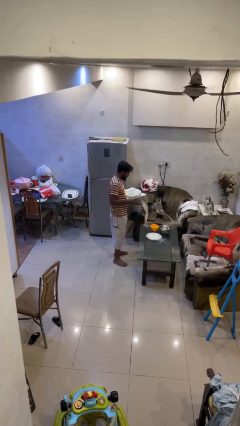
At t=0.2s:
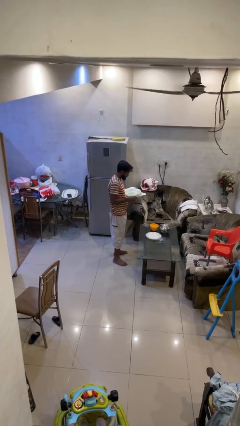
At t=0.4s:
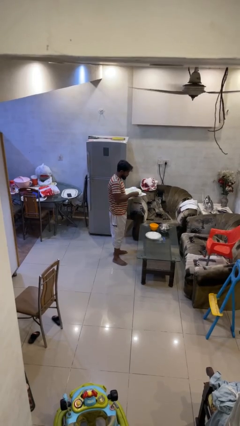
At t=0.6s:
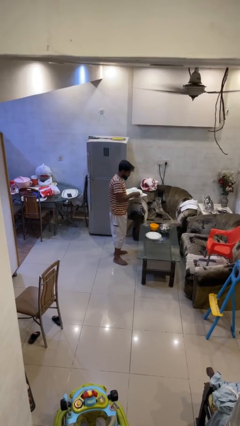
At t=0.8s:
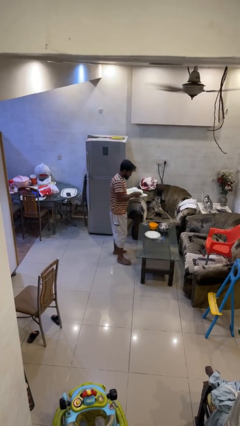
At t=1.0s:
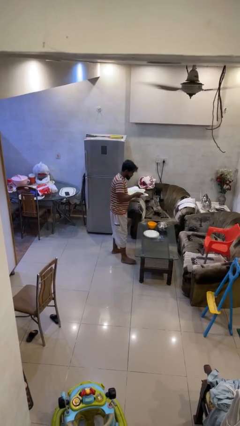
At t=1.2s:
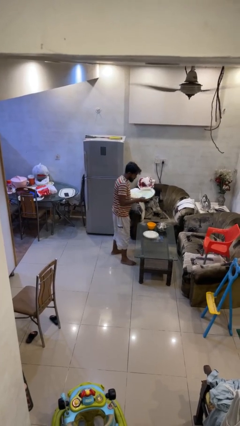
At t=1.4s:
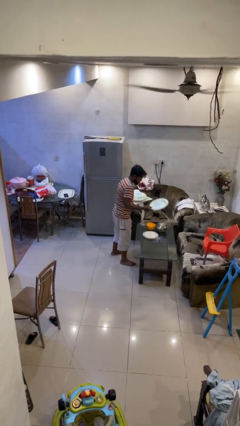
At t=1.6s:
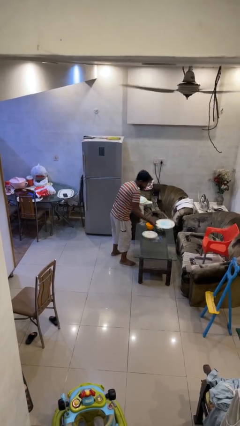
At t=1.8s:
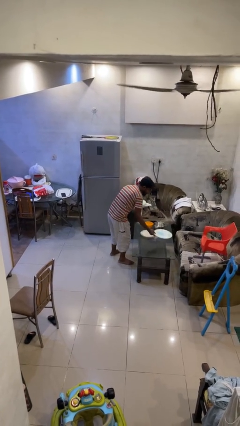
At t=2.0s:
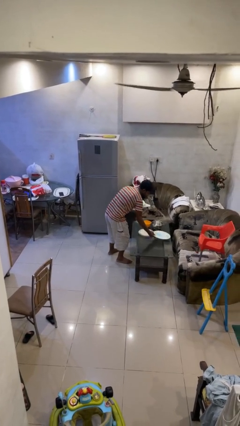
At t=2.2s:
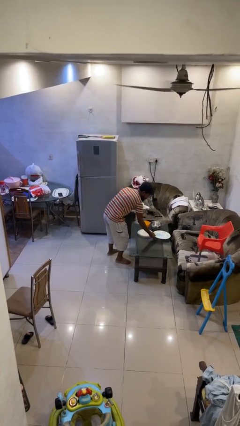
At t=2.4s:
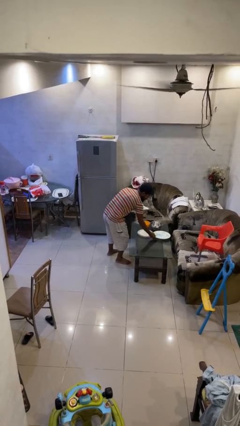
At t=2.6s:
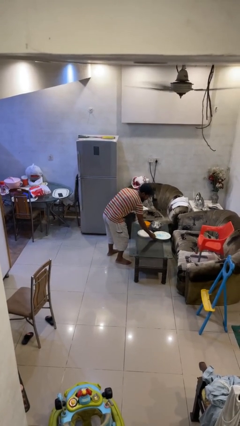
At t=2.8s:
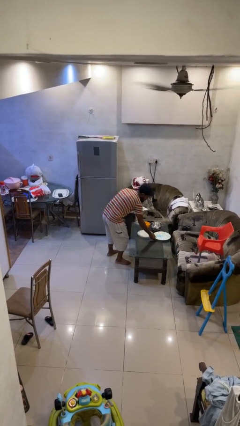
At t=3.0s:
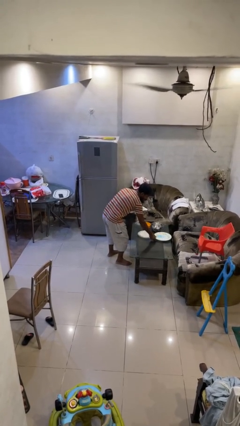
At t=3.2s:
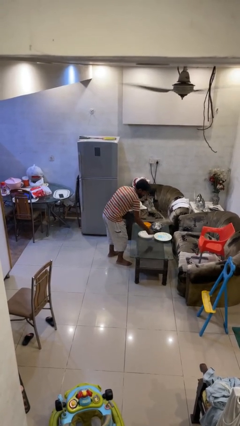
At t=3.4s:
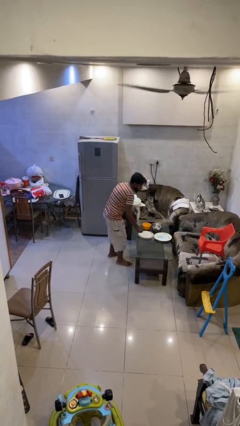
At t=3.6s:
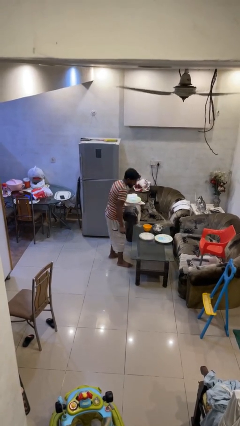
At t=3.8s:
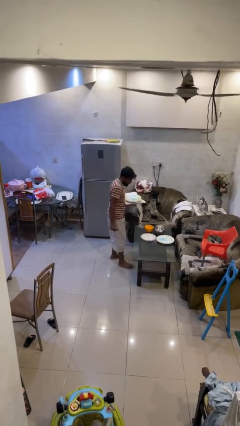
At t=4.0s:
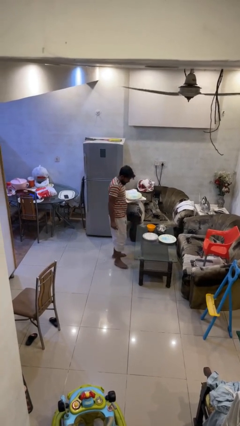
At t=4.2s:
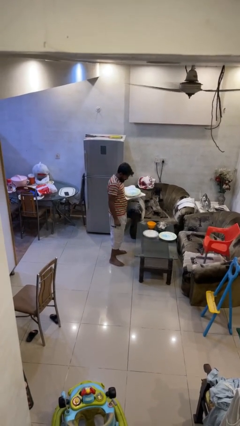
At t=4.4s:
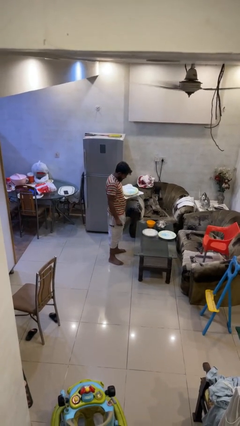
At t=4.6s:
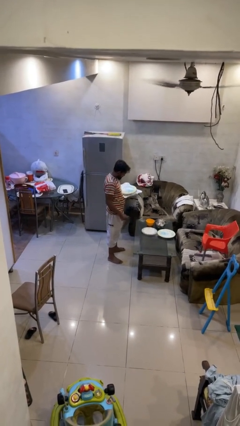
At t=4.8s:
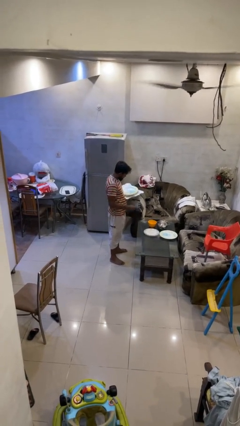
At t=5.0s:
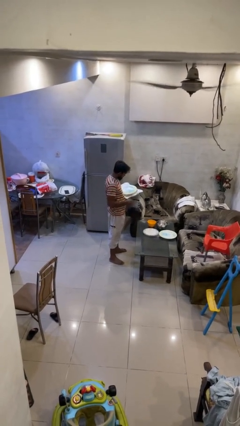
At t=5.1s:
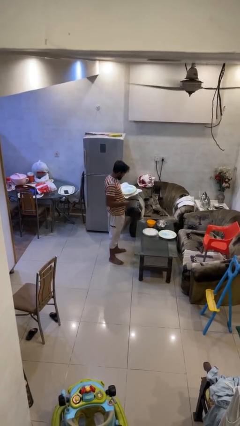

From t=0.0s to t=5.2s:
person sets table

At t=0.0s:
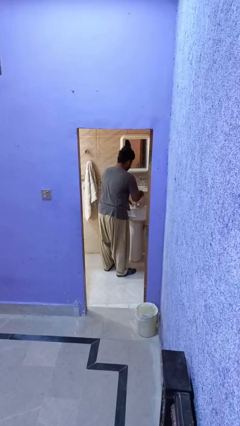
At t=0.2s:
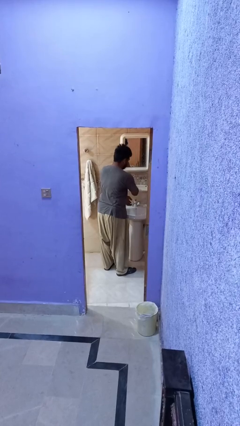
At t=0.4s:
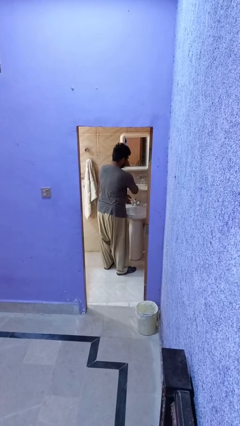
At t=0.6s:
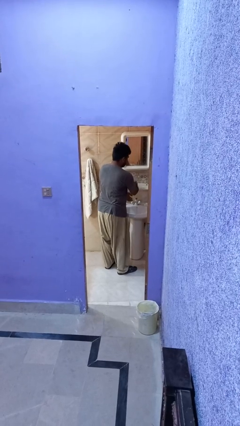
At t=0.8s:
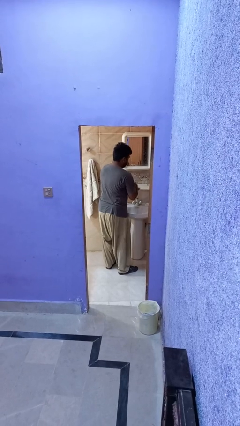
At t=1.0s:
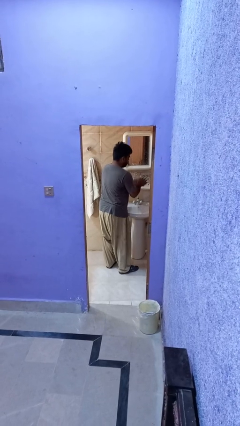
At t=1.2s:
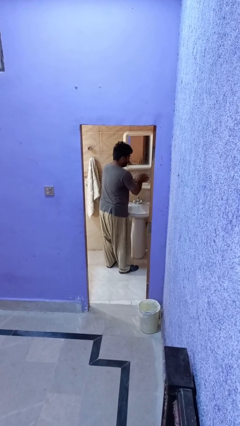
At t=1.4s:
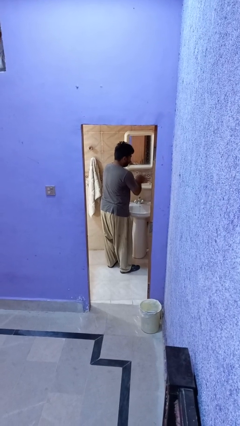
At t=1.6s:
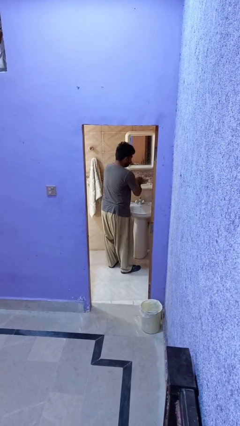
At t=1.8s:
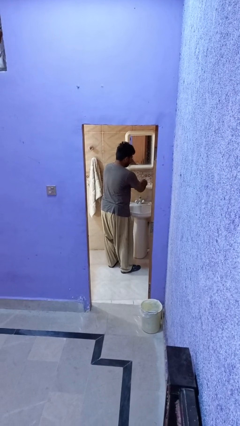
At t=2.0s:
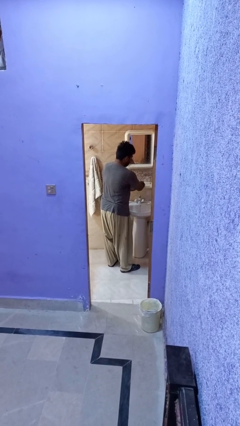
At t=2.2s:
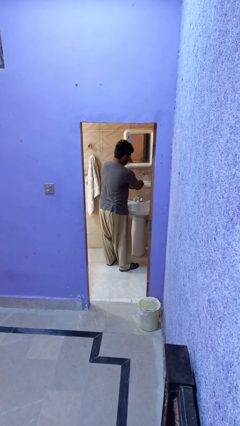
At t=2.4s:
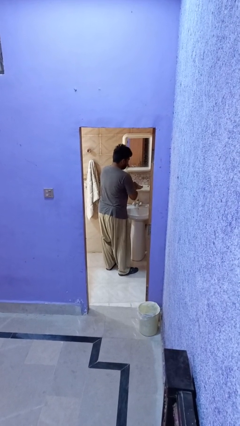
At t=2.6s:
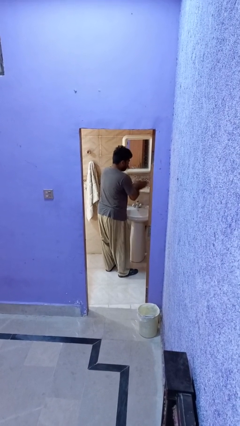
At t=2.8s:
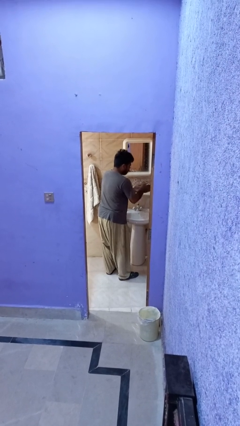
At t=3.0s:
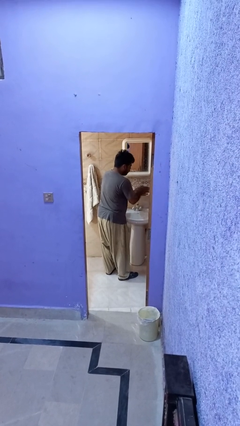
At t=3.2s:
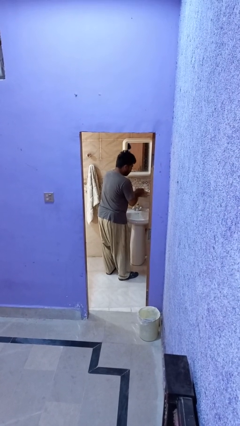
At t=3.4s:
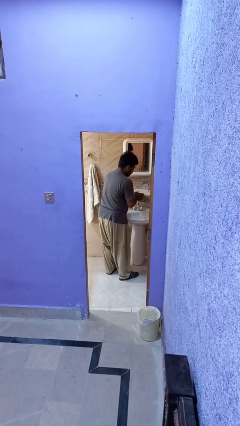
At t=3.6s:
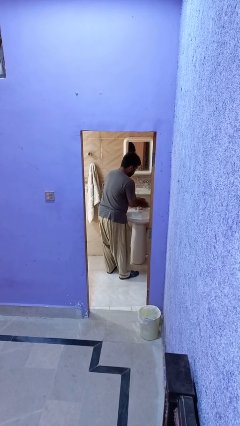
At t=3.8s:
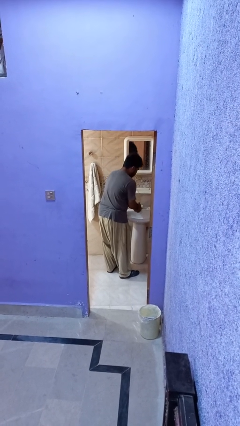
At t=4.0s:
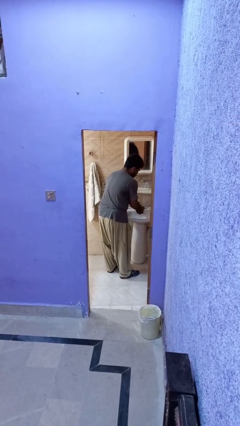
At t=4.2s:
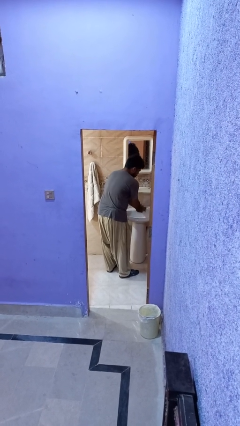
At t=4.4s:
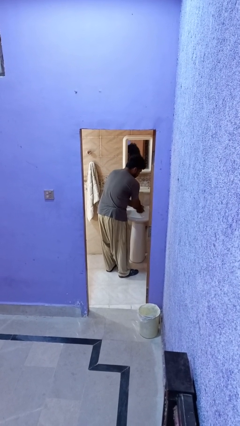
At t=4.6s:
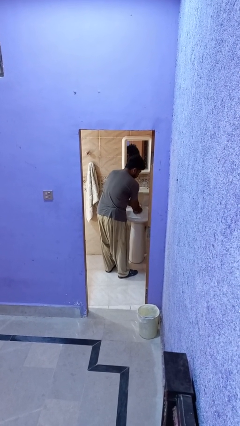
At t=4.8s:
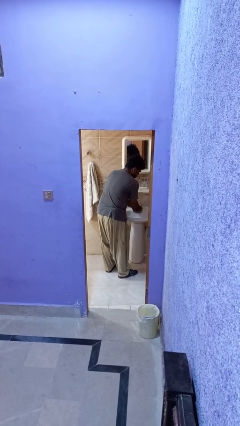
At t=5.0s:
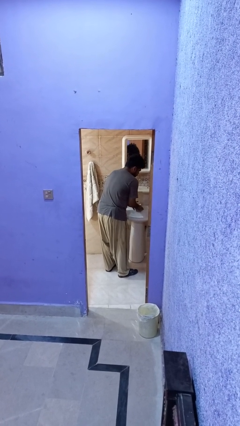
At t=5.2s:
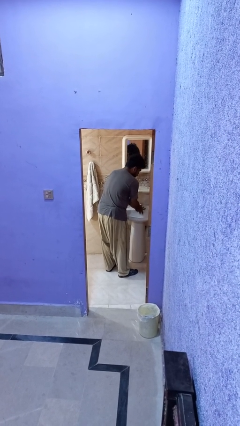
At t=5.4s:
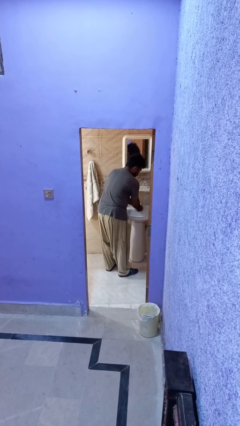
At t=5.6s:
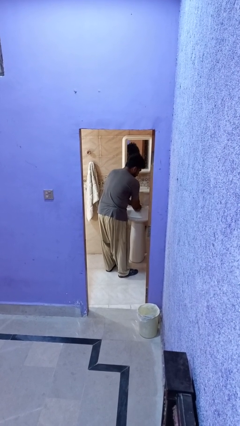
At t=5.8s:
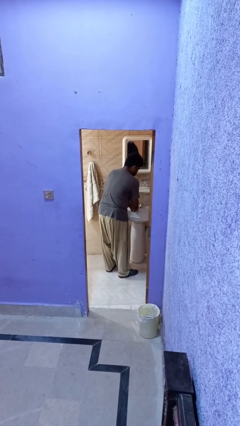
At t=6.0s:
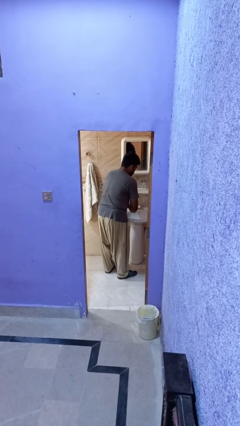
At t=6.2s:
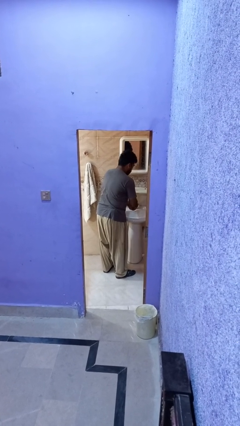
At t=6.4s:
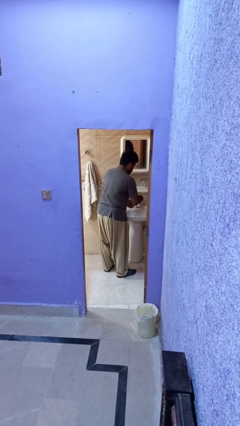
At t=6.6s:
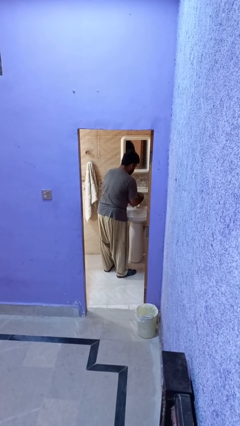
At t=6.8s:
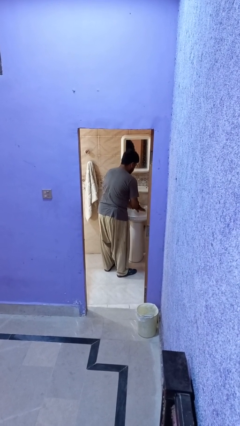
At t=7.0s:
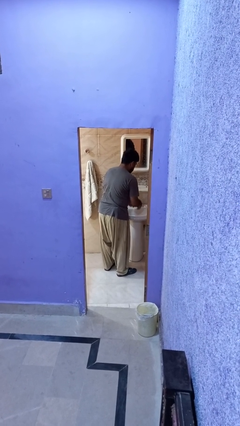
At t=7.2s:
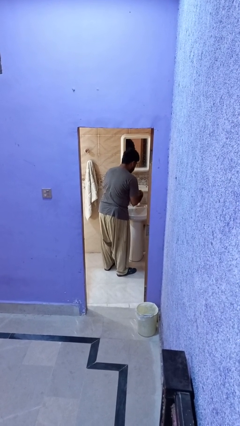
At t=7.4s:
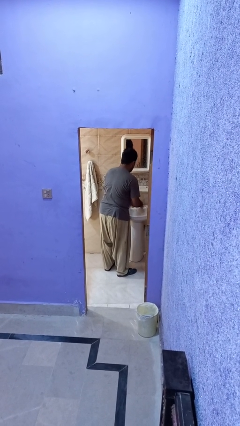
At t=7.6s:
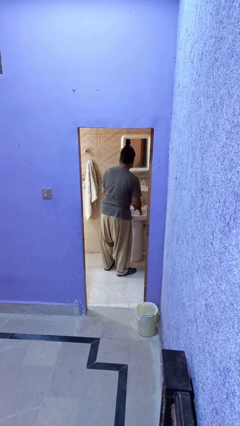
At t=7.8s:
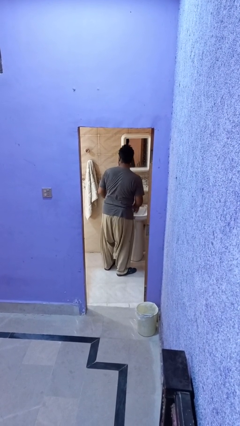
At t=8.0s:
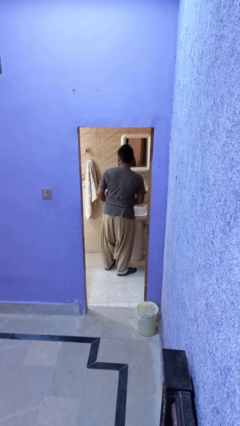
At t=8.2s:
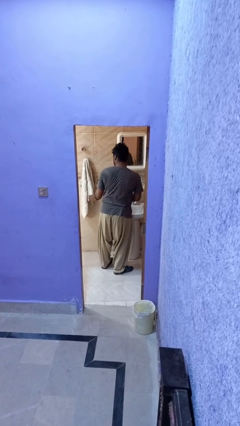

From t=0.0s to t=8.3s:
person washes hands

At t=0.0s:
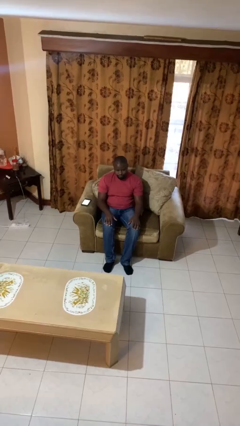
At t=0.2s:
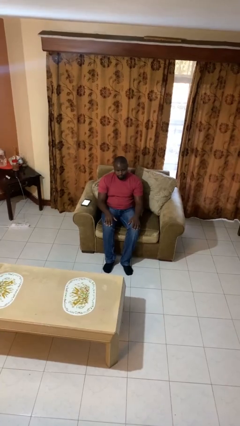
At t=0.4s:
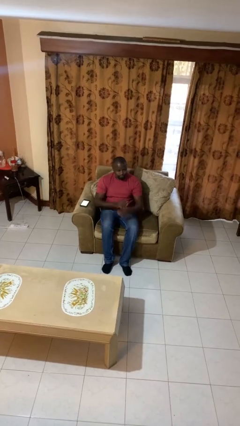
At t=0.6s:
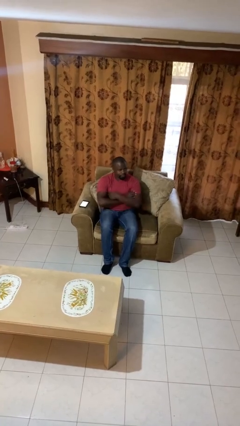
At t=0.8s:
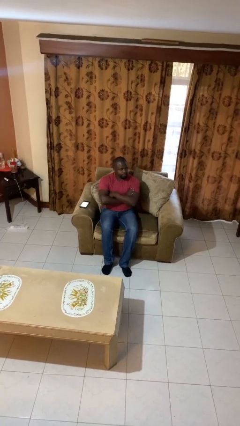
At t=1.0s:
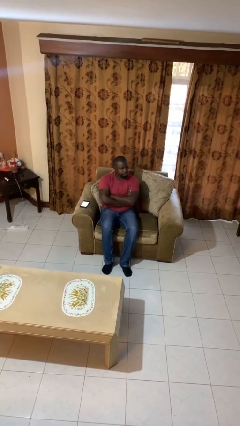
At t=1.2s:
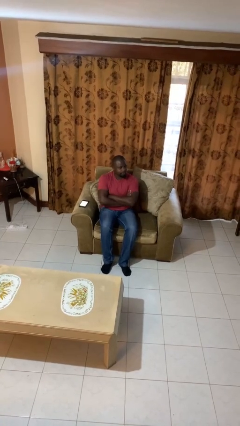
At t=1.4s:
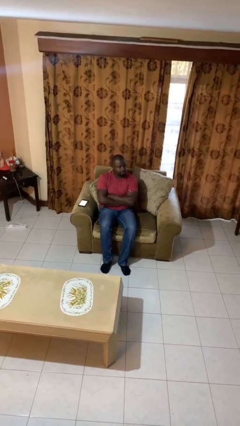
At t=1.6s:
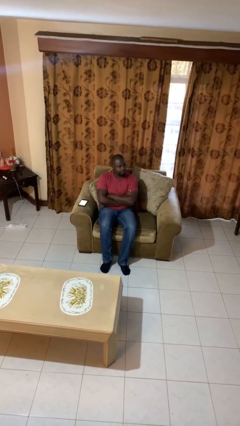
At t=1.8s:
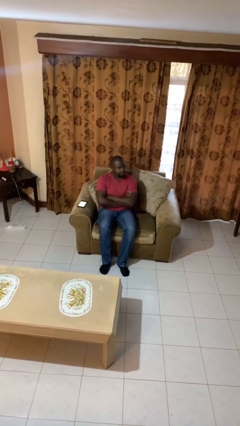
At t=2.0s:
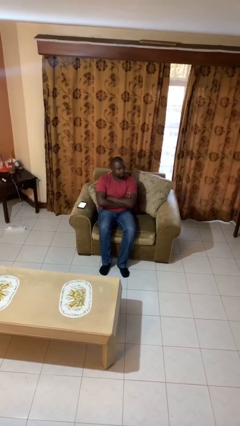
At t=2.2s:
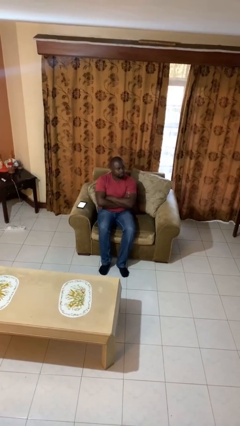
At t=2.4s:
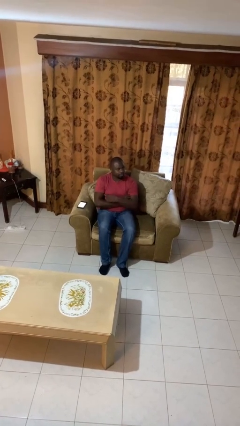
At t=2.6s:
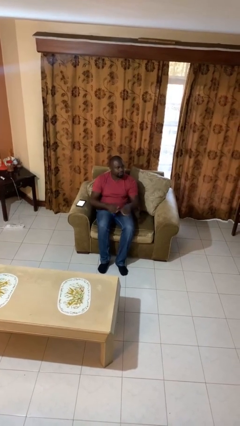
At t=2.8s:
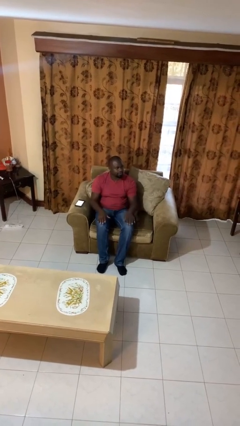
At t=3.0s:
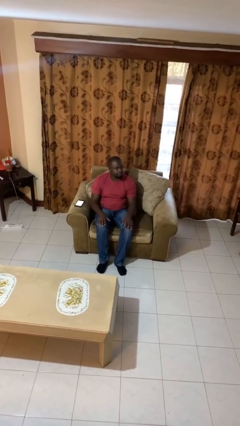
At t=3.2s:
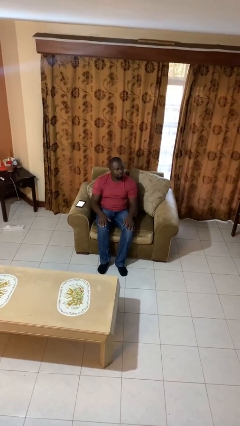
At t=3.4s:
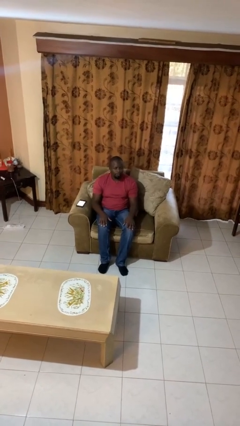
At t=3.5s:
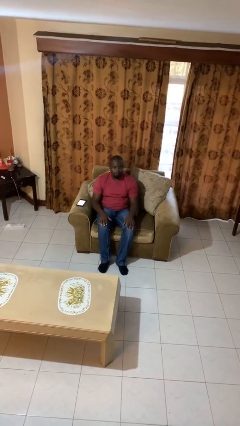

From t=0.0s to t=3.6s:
person crosses arms

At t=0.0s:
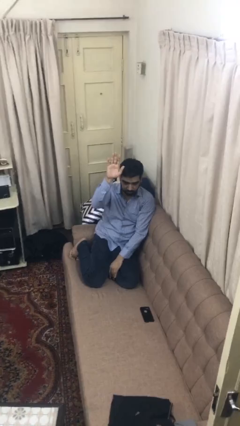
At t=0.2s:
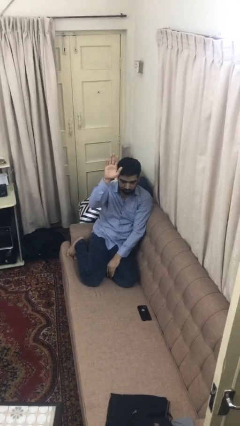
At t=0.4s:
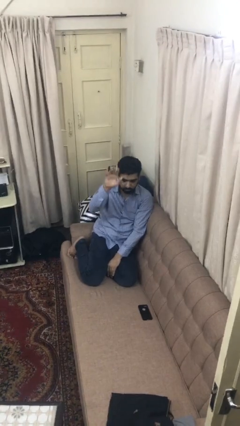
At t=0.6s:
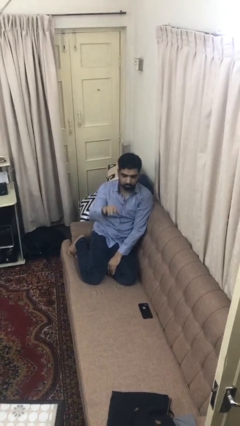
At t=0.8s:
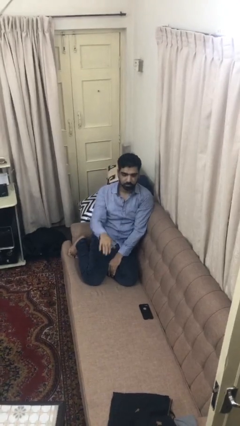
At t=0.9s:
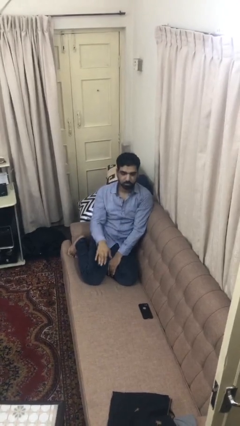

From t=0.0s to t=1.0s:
person gestures lower hand
